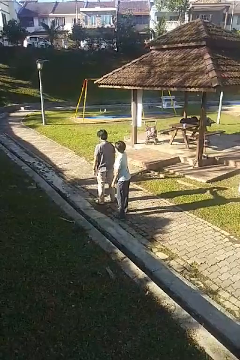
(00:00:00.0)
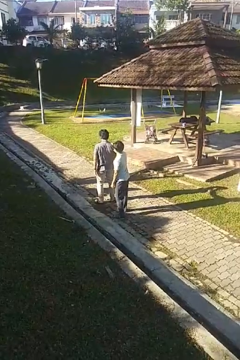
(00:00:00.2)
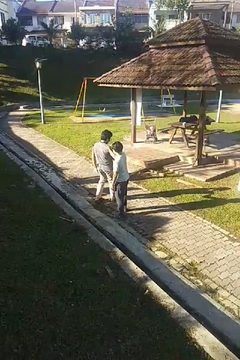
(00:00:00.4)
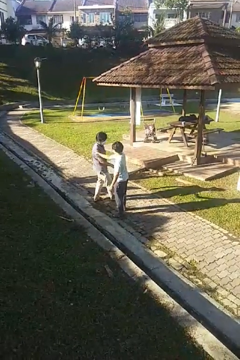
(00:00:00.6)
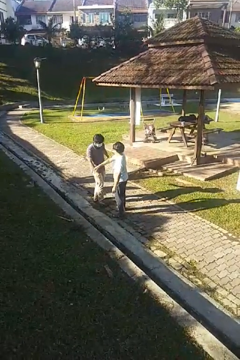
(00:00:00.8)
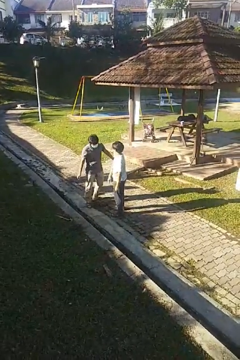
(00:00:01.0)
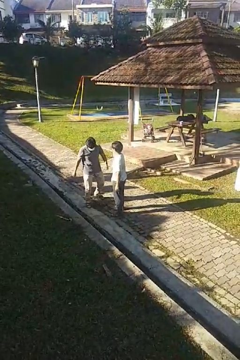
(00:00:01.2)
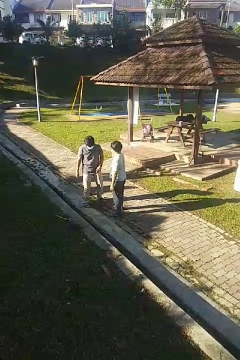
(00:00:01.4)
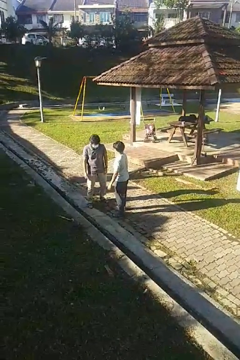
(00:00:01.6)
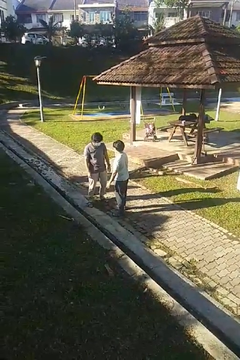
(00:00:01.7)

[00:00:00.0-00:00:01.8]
person spins person around

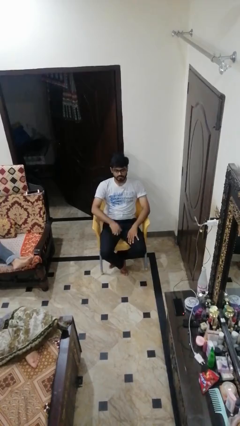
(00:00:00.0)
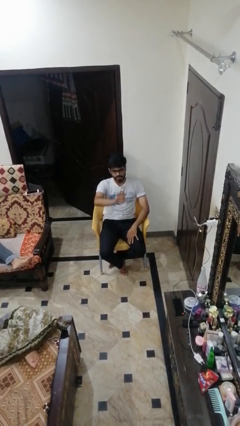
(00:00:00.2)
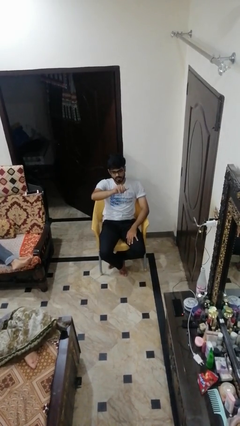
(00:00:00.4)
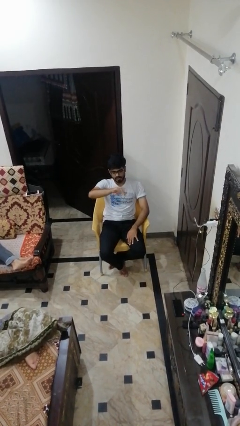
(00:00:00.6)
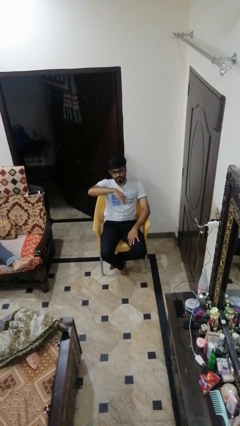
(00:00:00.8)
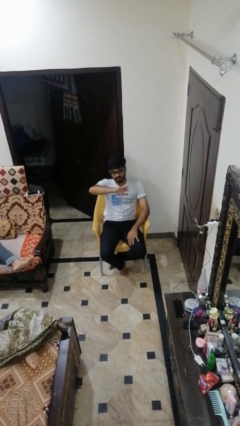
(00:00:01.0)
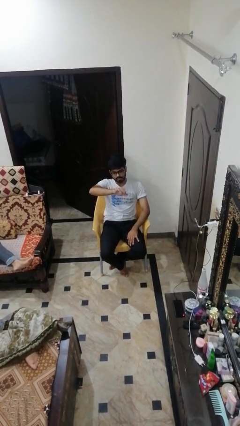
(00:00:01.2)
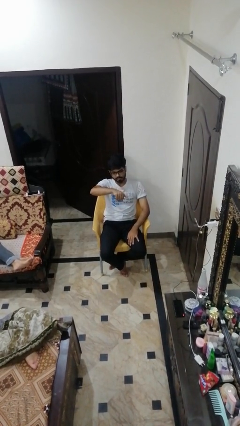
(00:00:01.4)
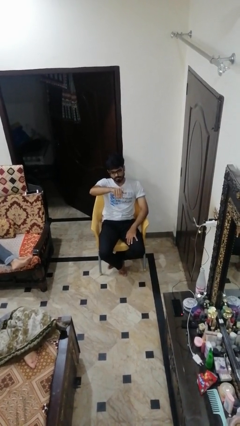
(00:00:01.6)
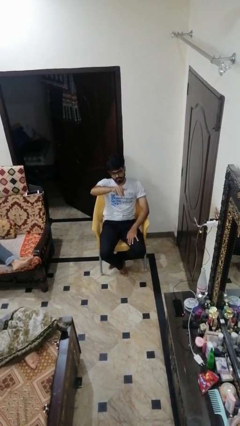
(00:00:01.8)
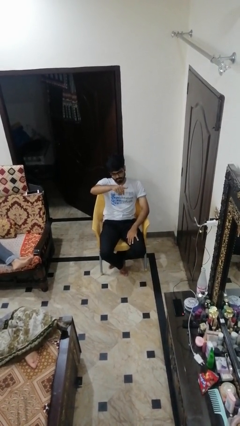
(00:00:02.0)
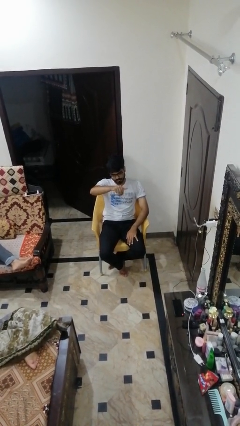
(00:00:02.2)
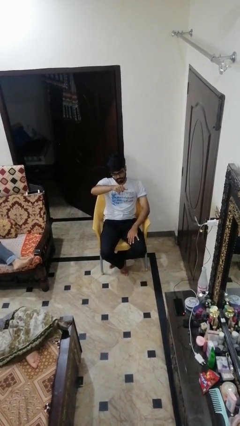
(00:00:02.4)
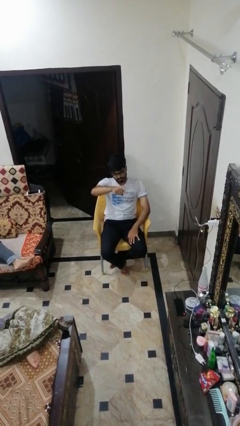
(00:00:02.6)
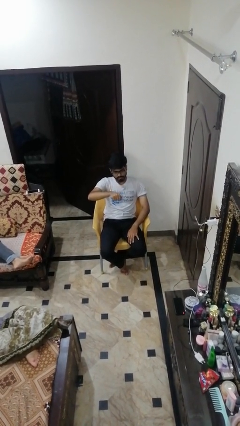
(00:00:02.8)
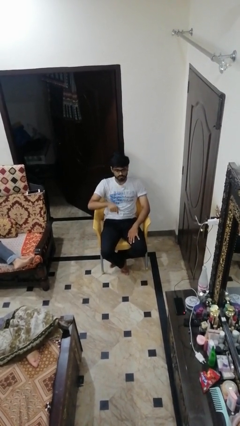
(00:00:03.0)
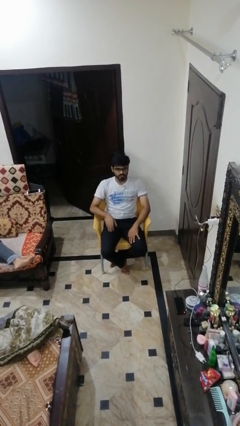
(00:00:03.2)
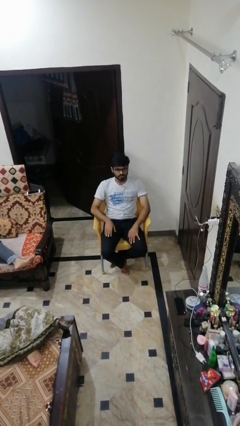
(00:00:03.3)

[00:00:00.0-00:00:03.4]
person gestures come here

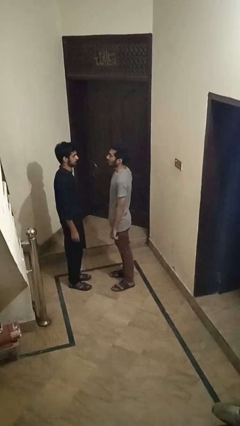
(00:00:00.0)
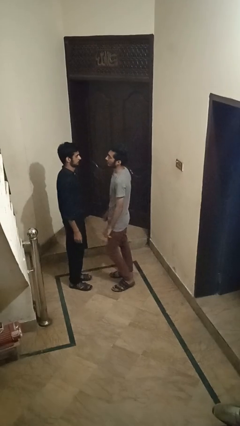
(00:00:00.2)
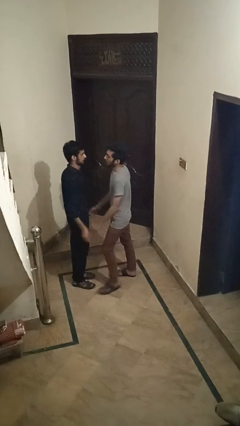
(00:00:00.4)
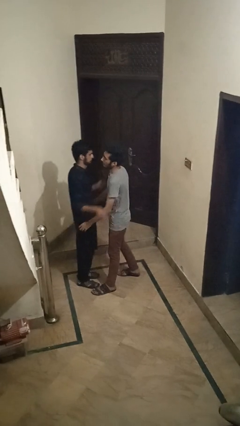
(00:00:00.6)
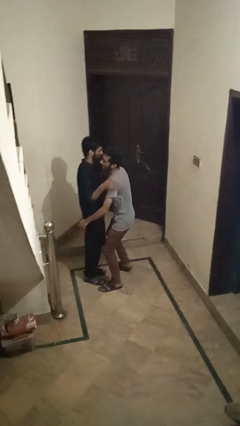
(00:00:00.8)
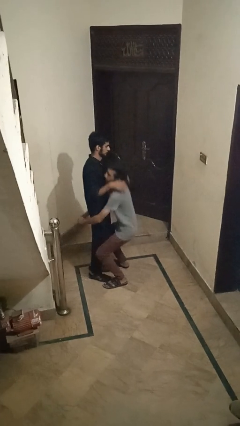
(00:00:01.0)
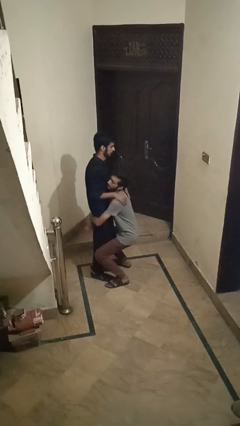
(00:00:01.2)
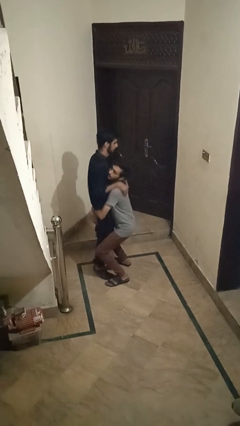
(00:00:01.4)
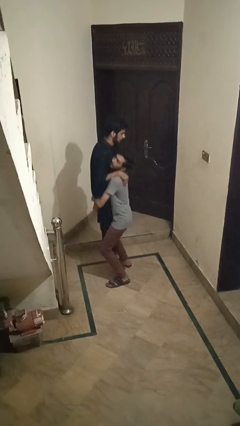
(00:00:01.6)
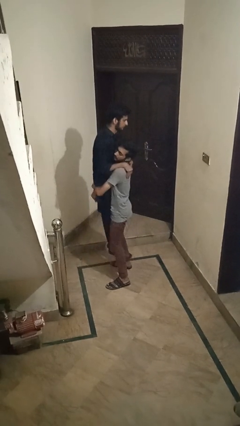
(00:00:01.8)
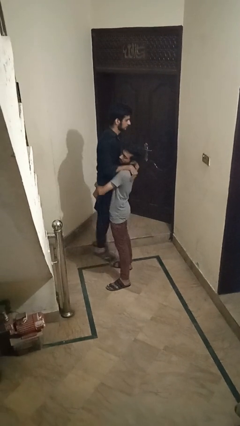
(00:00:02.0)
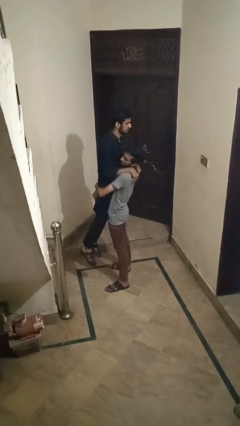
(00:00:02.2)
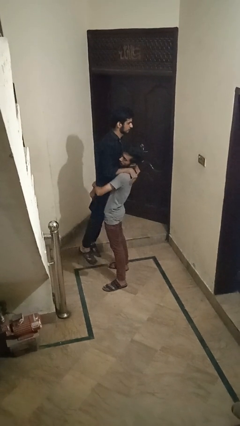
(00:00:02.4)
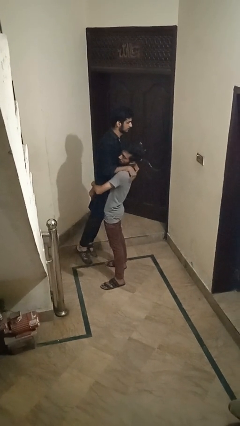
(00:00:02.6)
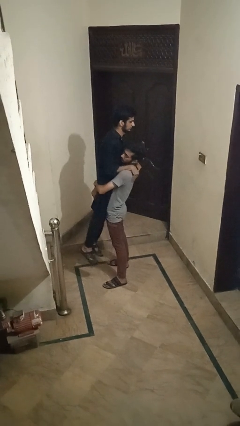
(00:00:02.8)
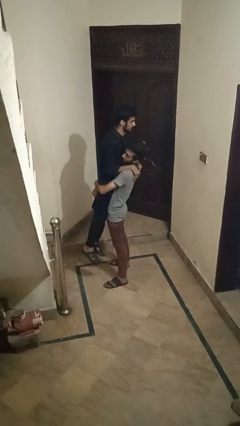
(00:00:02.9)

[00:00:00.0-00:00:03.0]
person picks up person

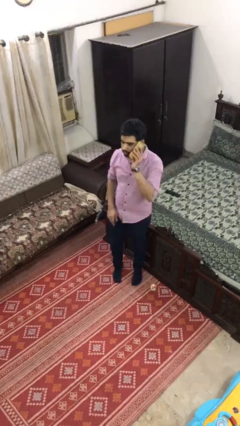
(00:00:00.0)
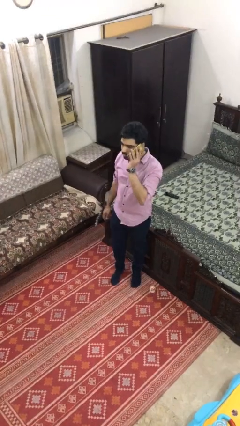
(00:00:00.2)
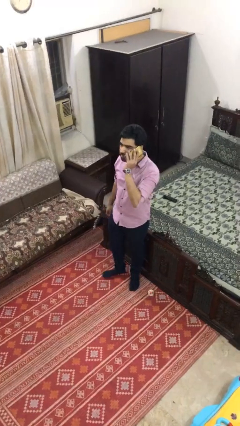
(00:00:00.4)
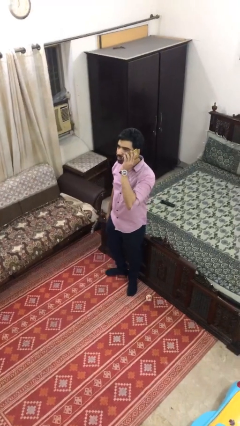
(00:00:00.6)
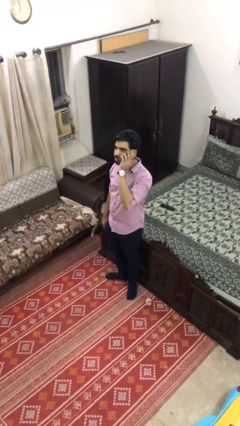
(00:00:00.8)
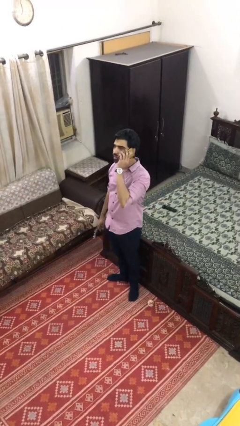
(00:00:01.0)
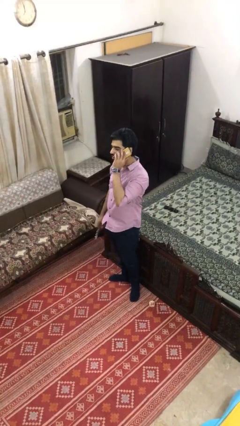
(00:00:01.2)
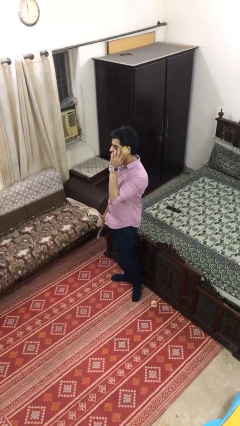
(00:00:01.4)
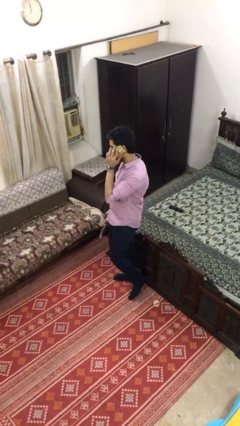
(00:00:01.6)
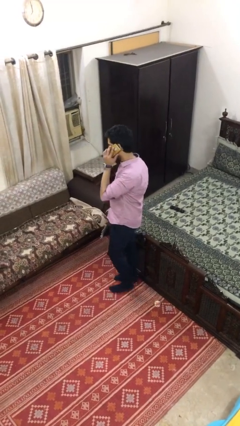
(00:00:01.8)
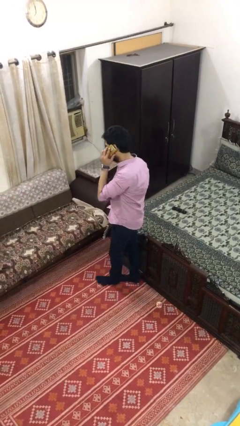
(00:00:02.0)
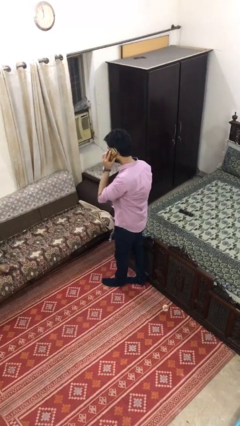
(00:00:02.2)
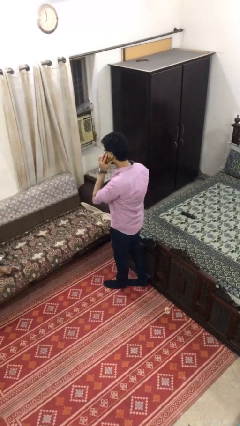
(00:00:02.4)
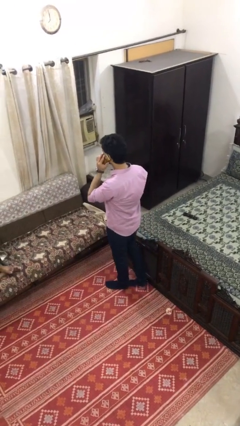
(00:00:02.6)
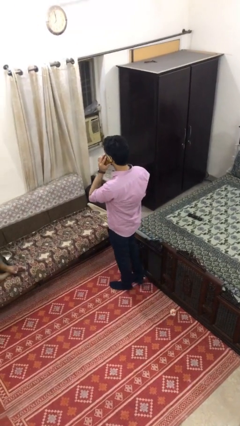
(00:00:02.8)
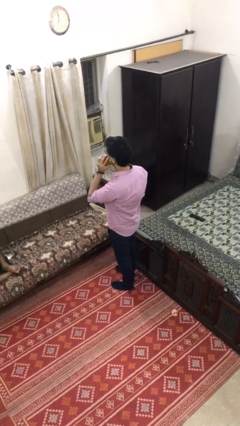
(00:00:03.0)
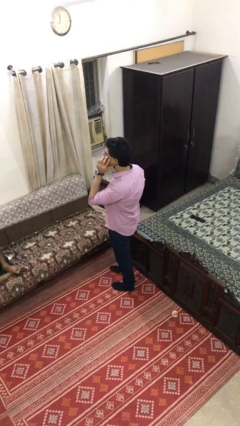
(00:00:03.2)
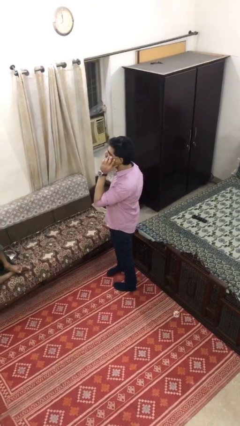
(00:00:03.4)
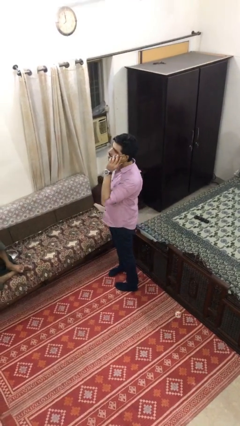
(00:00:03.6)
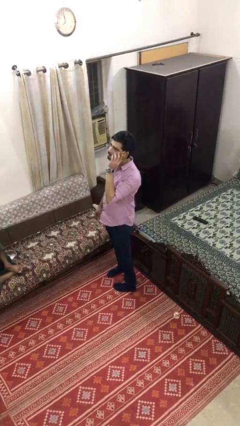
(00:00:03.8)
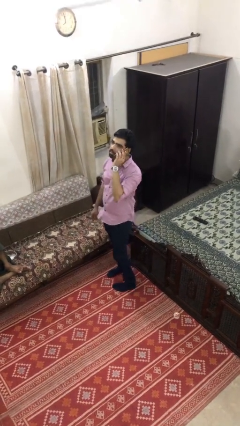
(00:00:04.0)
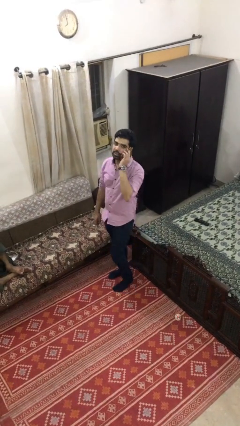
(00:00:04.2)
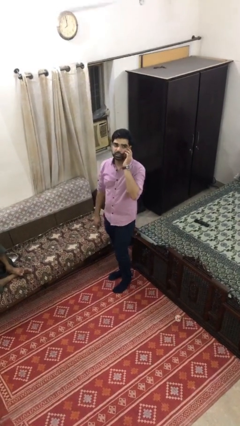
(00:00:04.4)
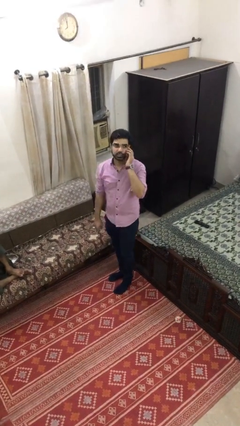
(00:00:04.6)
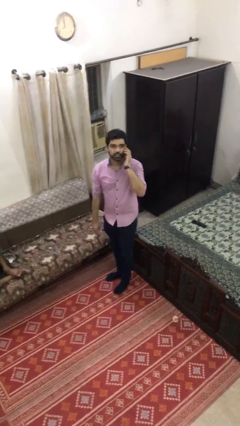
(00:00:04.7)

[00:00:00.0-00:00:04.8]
person talks on phone

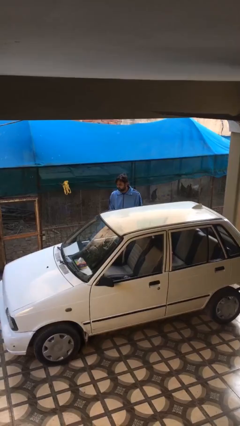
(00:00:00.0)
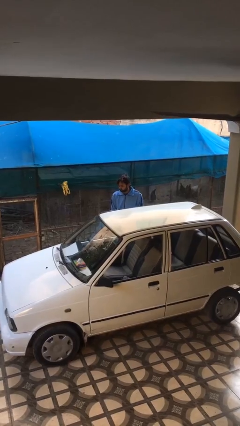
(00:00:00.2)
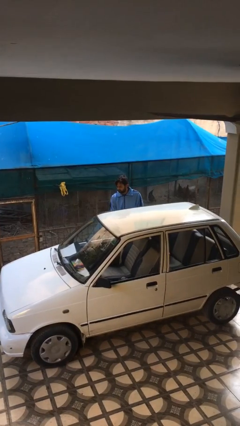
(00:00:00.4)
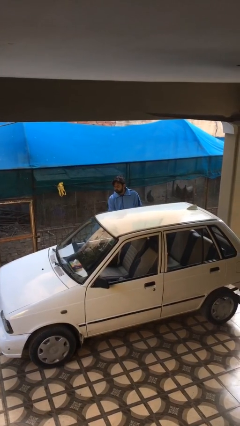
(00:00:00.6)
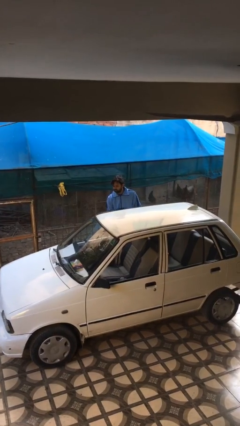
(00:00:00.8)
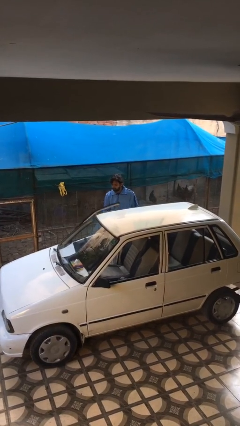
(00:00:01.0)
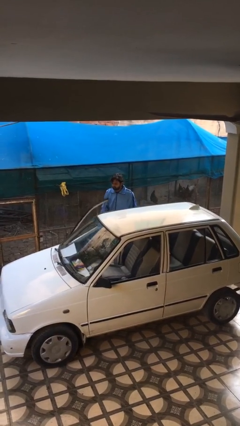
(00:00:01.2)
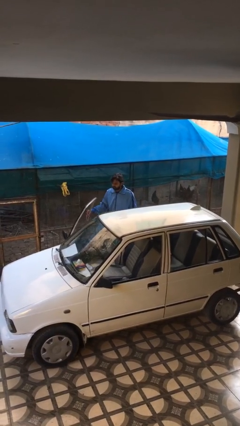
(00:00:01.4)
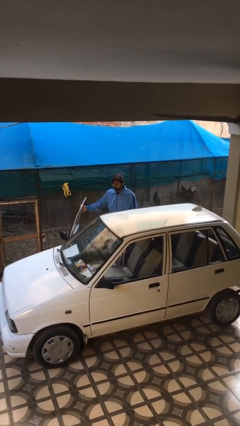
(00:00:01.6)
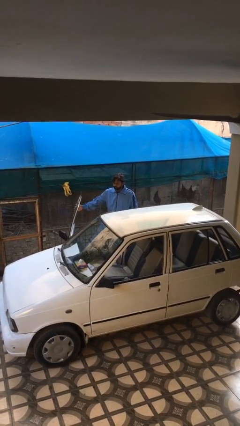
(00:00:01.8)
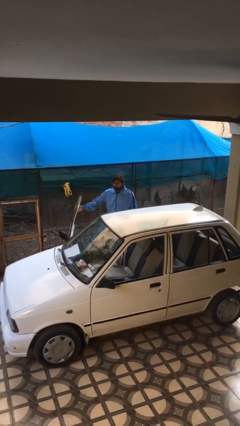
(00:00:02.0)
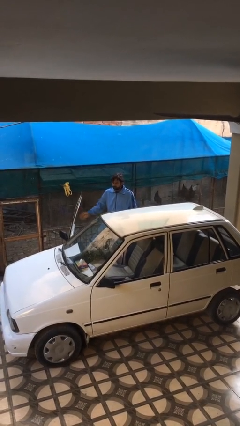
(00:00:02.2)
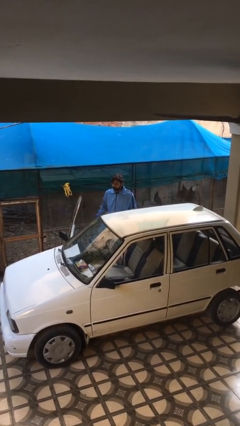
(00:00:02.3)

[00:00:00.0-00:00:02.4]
person opens car door

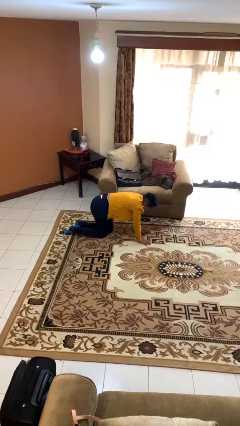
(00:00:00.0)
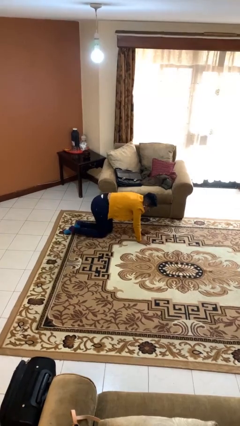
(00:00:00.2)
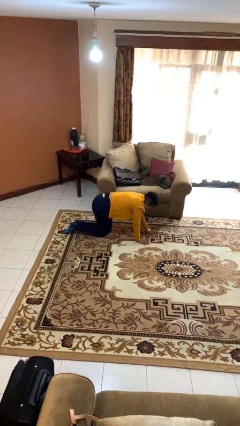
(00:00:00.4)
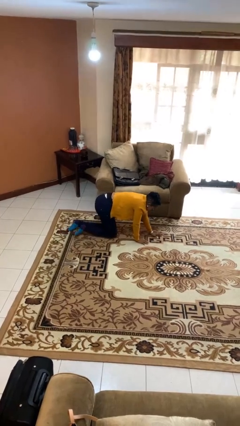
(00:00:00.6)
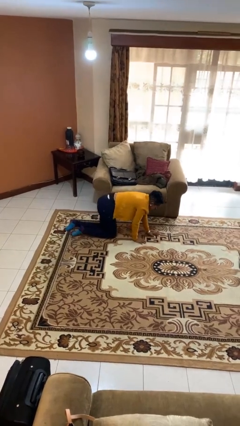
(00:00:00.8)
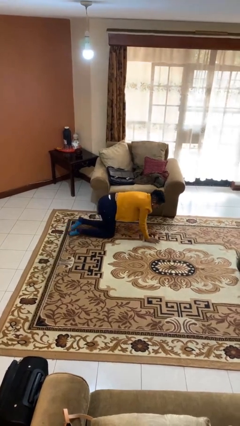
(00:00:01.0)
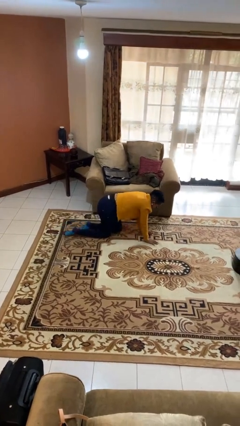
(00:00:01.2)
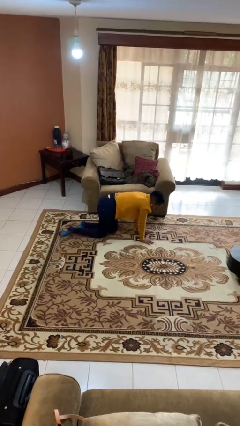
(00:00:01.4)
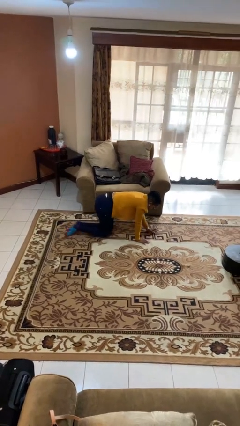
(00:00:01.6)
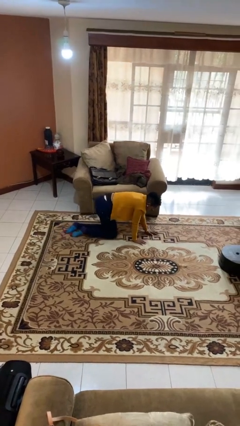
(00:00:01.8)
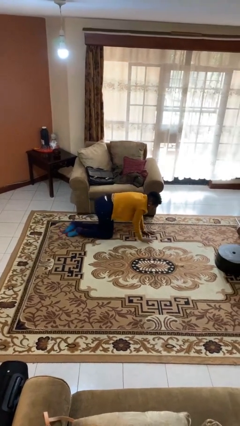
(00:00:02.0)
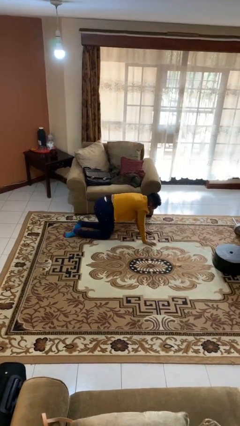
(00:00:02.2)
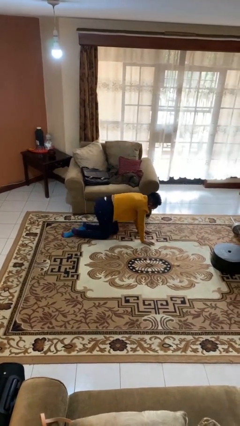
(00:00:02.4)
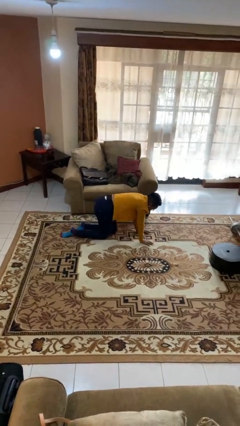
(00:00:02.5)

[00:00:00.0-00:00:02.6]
person crawls
